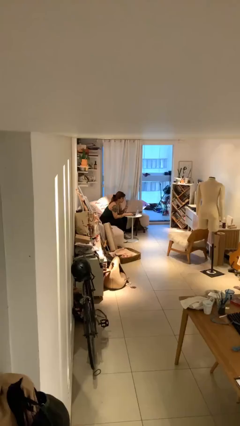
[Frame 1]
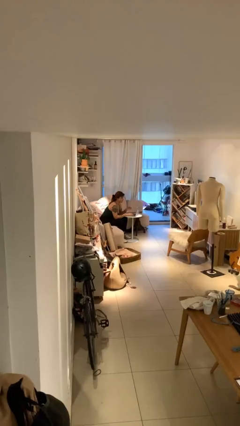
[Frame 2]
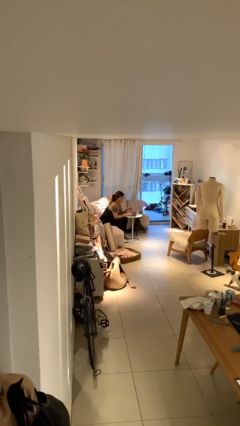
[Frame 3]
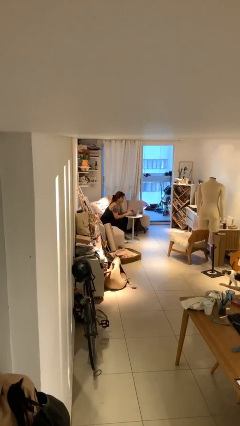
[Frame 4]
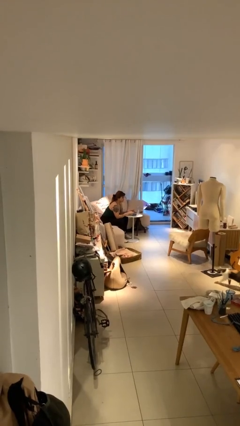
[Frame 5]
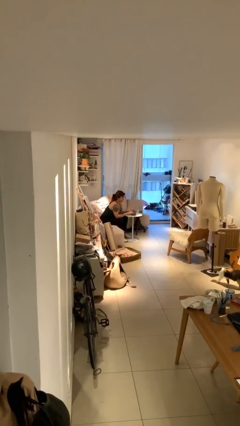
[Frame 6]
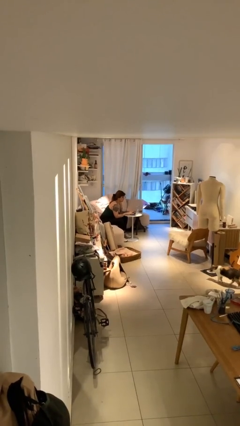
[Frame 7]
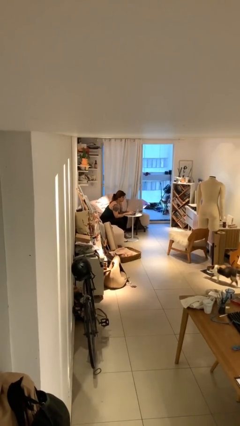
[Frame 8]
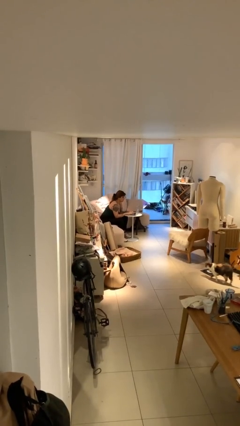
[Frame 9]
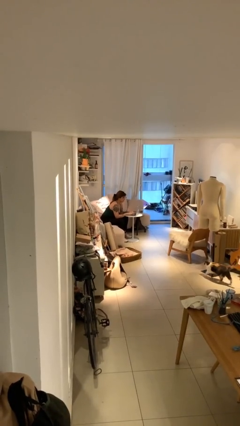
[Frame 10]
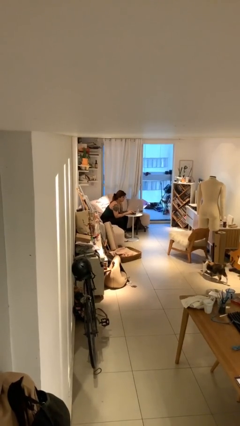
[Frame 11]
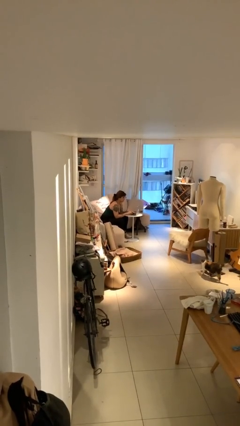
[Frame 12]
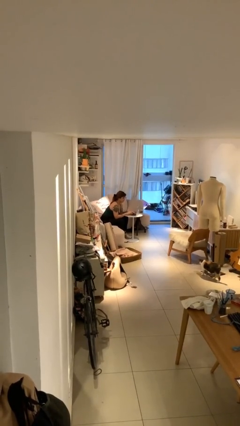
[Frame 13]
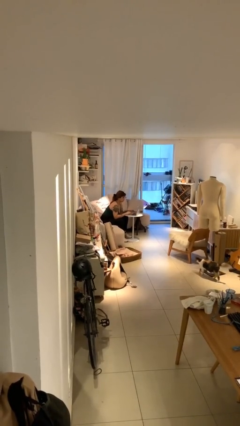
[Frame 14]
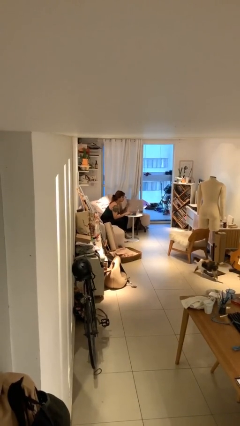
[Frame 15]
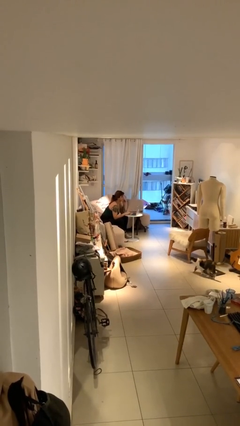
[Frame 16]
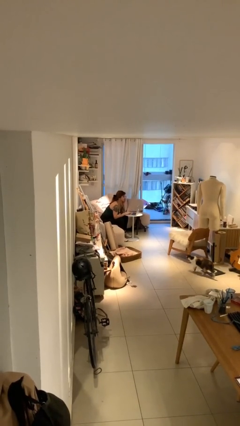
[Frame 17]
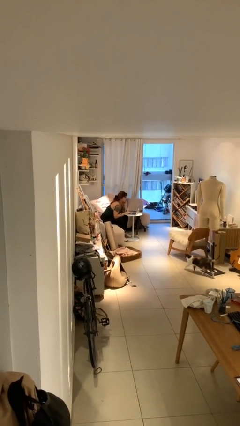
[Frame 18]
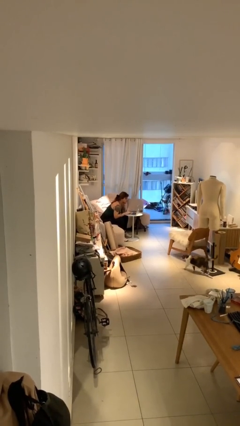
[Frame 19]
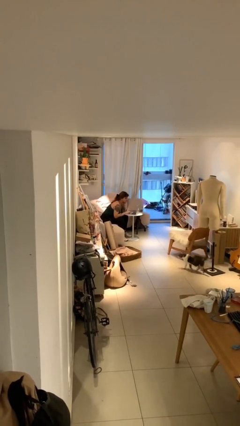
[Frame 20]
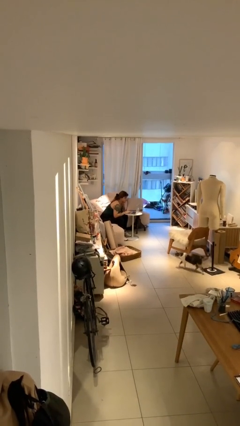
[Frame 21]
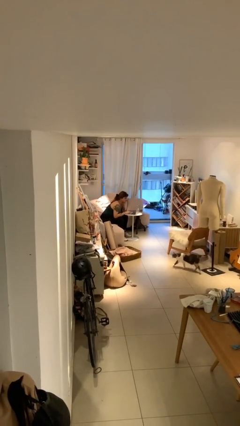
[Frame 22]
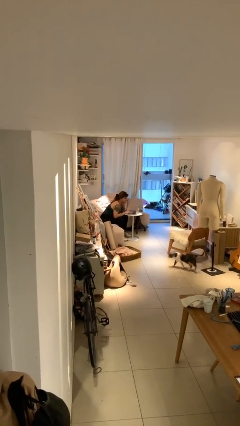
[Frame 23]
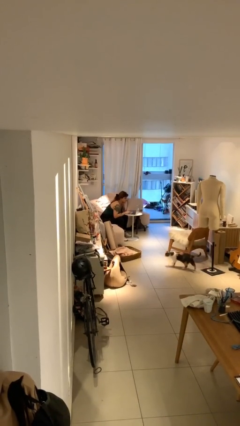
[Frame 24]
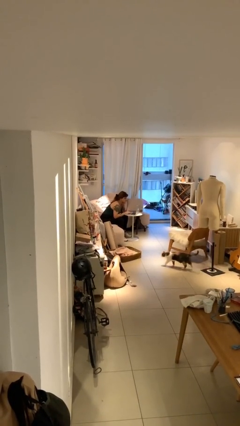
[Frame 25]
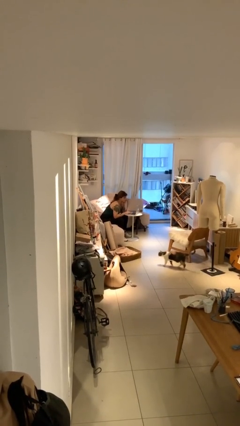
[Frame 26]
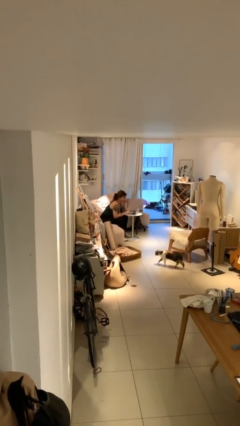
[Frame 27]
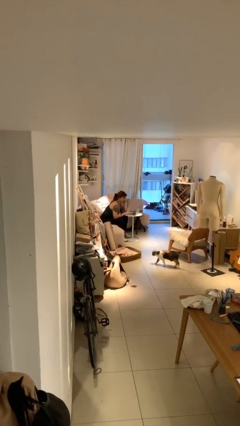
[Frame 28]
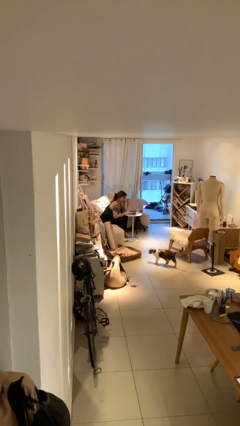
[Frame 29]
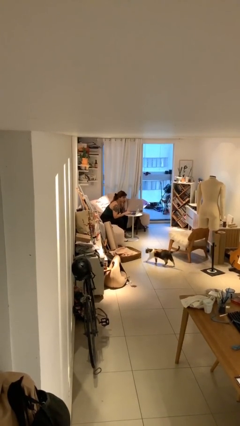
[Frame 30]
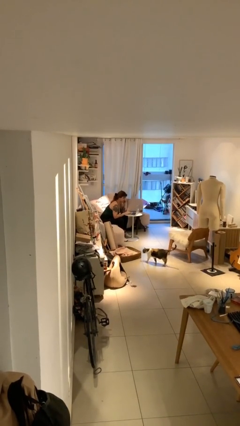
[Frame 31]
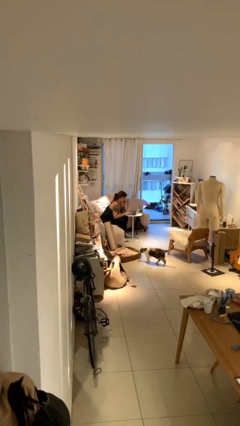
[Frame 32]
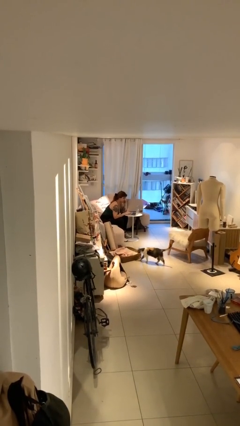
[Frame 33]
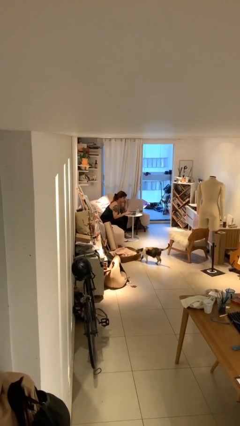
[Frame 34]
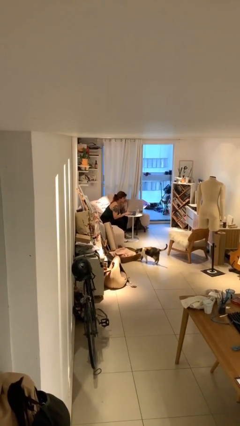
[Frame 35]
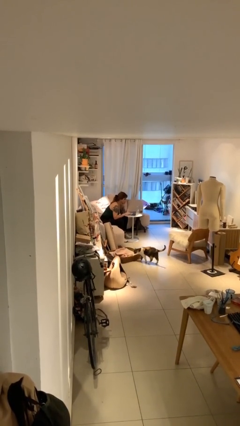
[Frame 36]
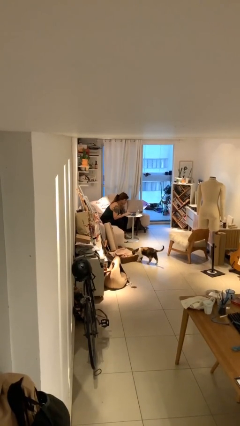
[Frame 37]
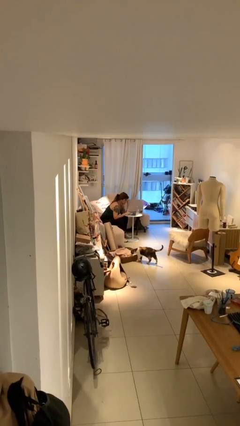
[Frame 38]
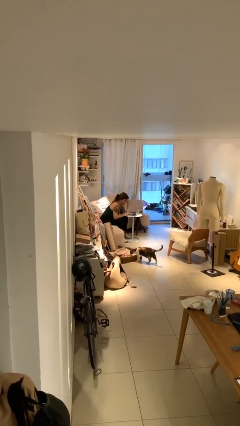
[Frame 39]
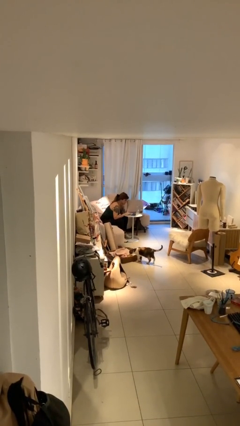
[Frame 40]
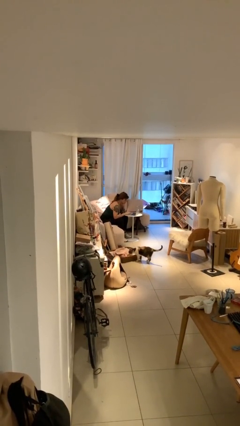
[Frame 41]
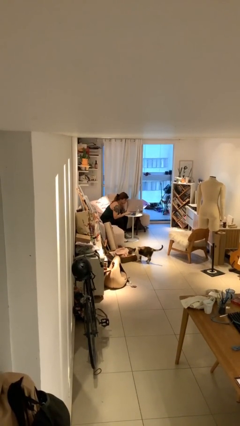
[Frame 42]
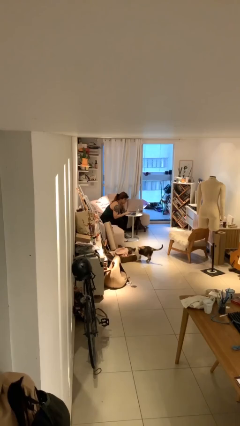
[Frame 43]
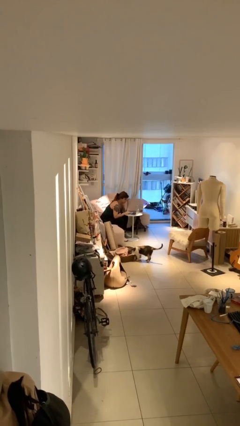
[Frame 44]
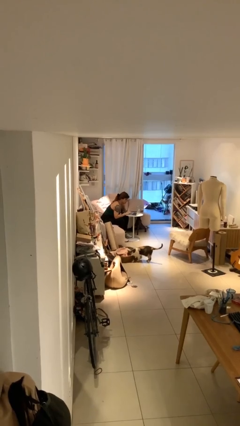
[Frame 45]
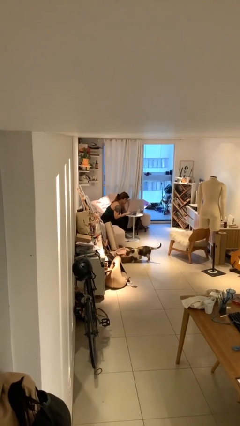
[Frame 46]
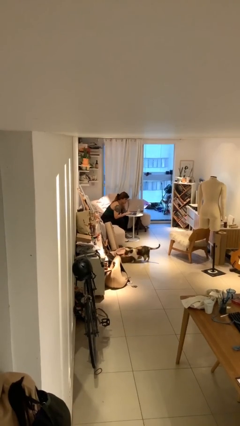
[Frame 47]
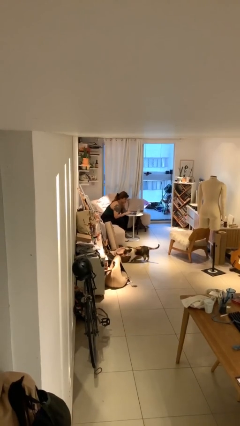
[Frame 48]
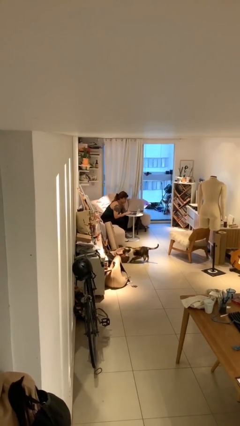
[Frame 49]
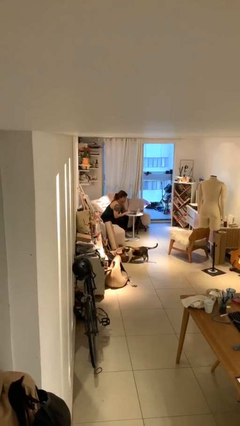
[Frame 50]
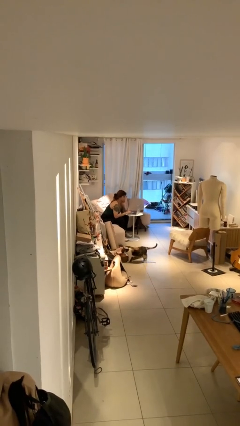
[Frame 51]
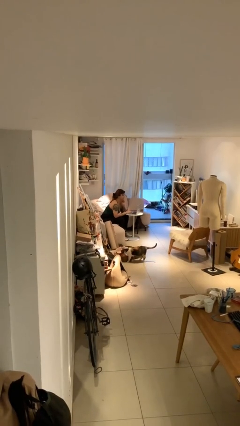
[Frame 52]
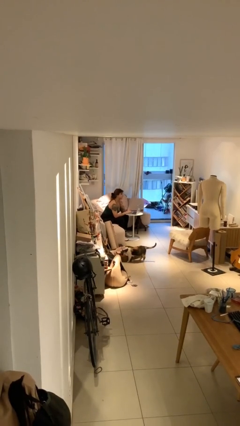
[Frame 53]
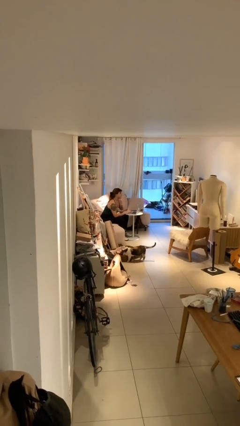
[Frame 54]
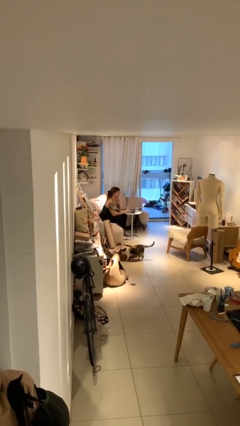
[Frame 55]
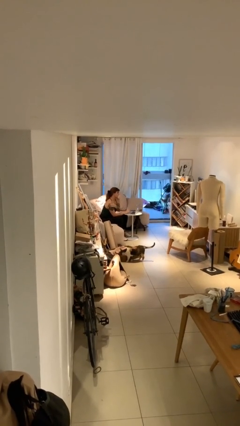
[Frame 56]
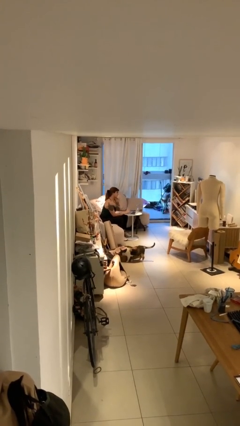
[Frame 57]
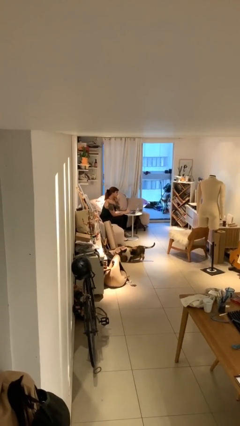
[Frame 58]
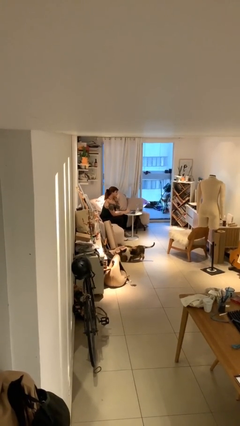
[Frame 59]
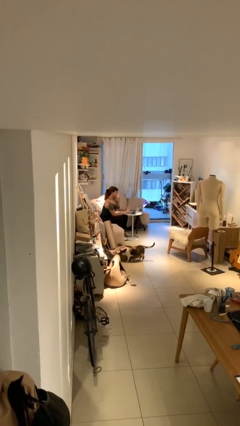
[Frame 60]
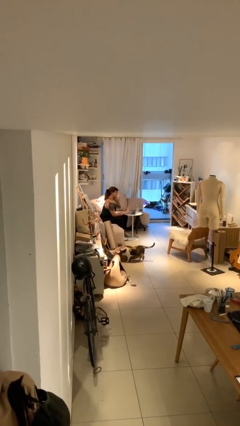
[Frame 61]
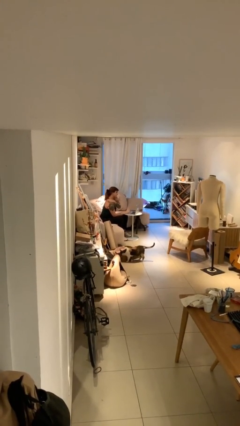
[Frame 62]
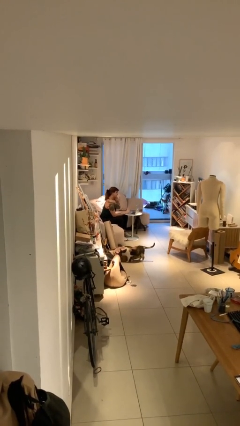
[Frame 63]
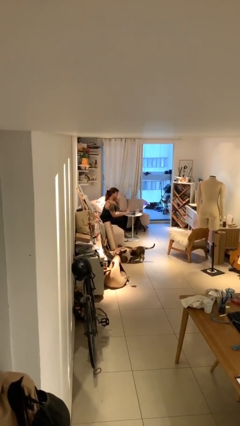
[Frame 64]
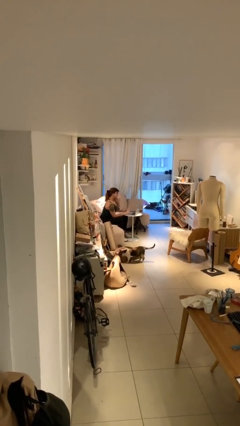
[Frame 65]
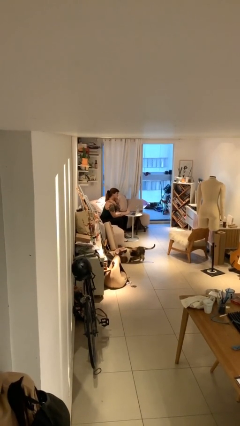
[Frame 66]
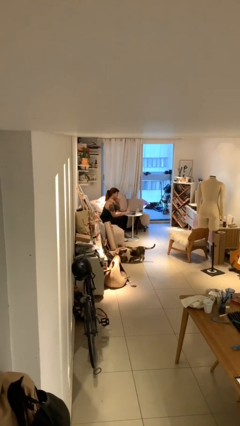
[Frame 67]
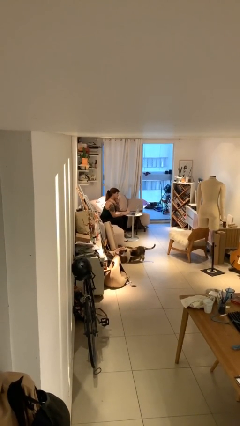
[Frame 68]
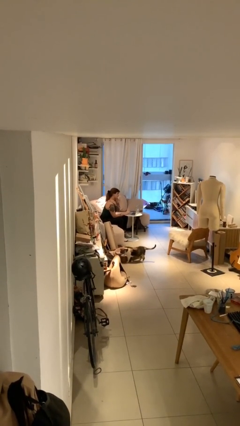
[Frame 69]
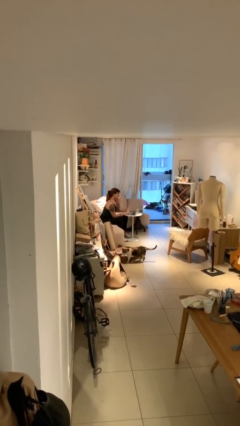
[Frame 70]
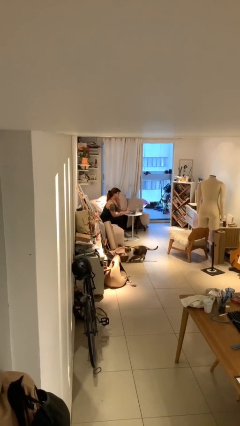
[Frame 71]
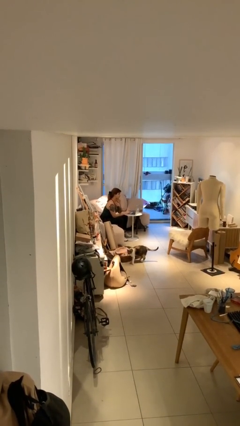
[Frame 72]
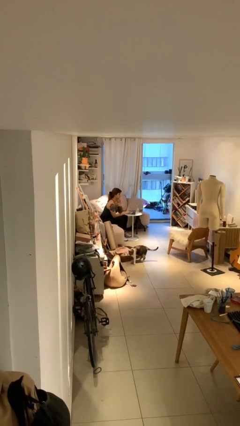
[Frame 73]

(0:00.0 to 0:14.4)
person interacts with laptop

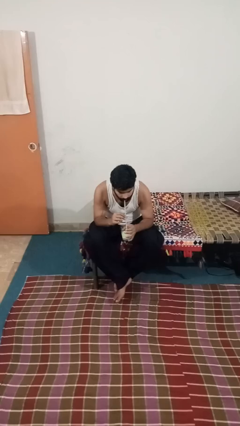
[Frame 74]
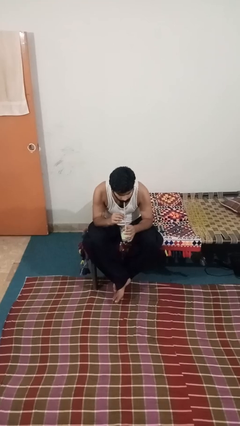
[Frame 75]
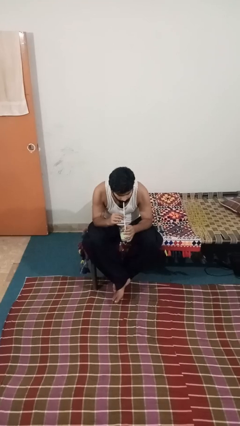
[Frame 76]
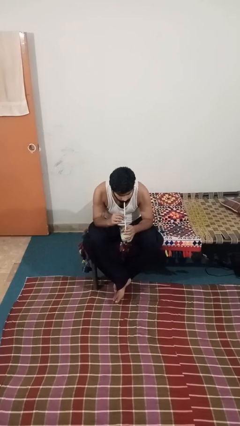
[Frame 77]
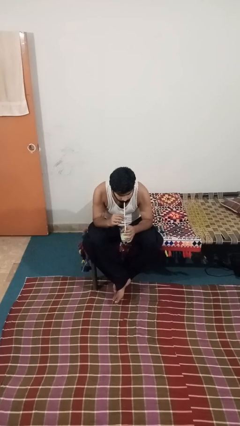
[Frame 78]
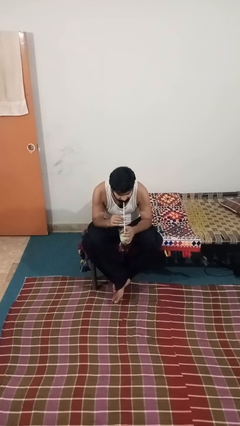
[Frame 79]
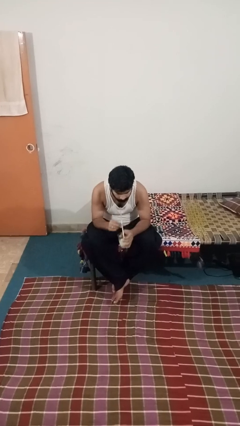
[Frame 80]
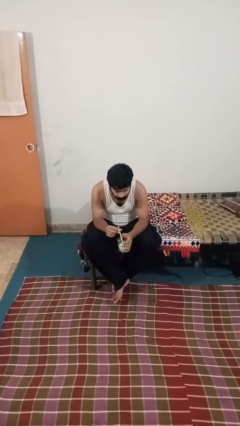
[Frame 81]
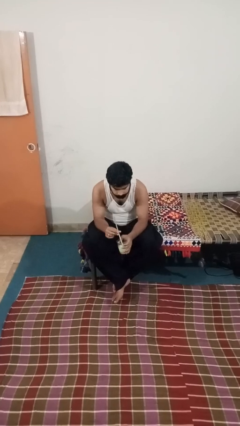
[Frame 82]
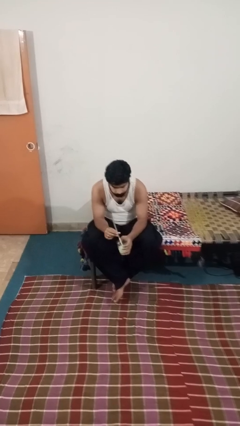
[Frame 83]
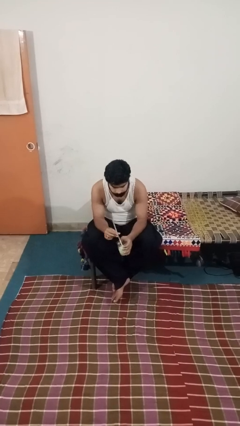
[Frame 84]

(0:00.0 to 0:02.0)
person drinks from straw

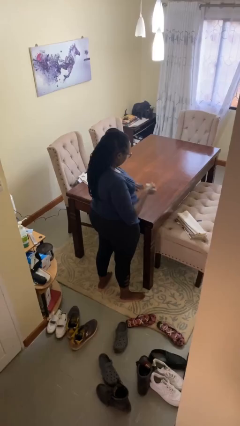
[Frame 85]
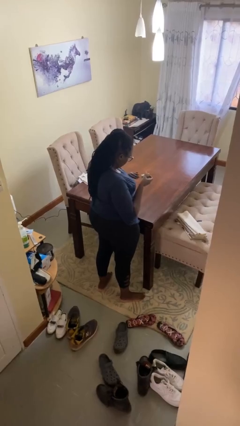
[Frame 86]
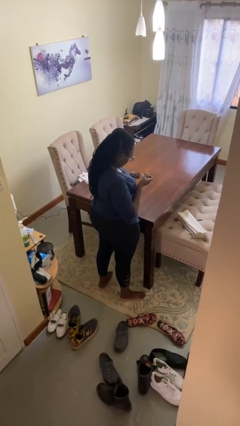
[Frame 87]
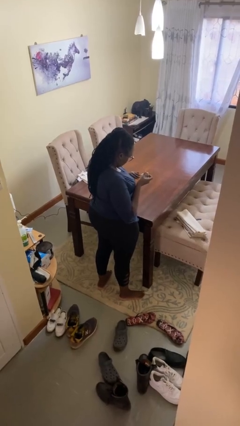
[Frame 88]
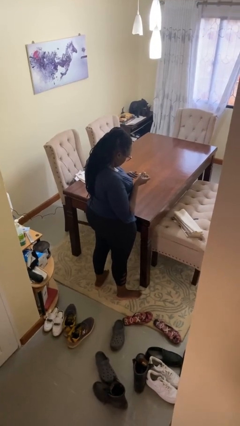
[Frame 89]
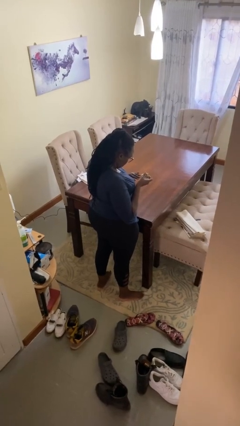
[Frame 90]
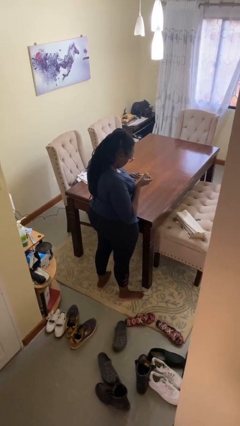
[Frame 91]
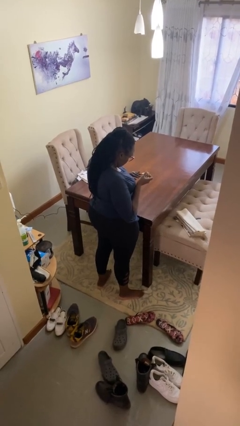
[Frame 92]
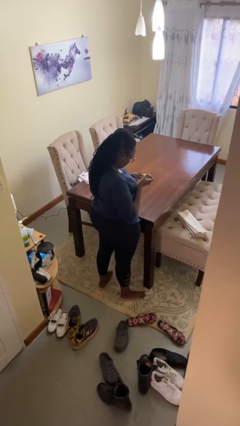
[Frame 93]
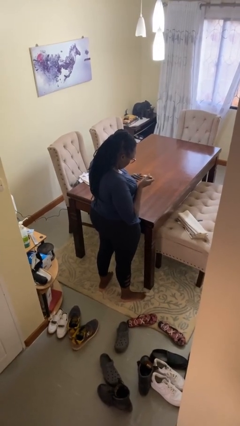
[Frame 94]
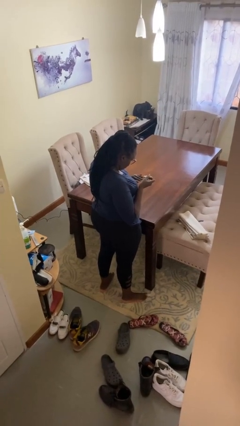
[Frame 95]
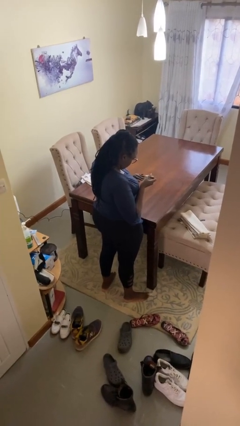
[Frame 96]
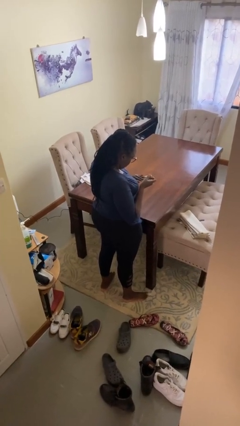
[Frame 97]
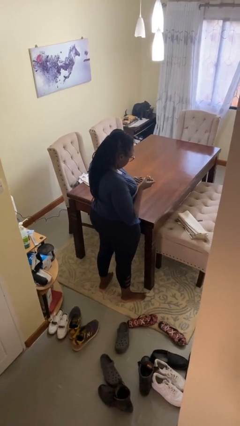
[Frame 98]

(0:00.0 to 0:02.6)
person clips fingernails
